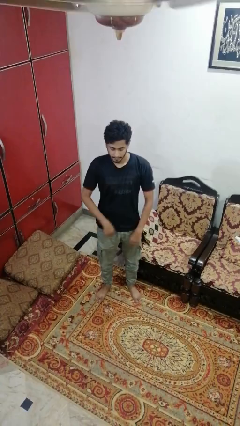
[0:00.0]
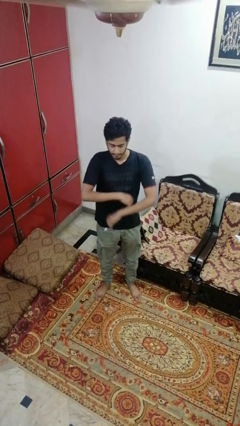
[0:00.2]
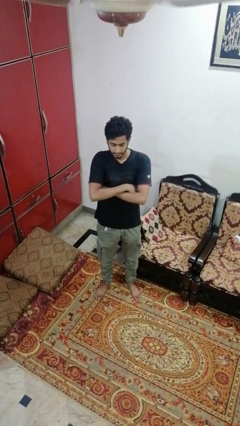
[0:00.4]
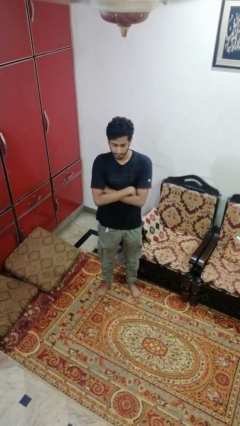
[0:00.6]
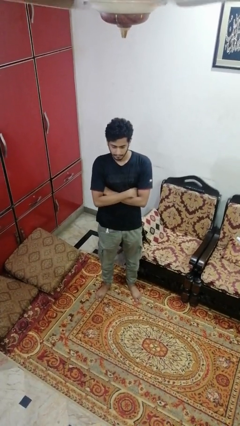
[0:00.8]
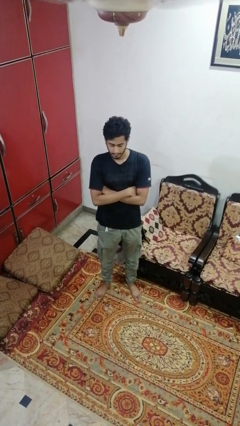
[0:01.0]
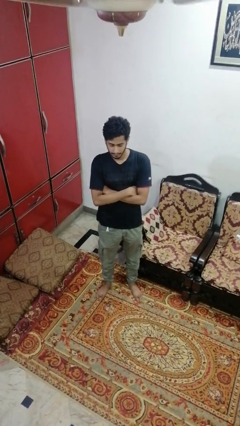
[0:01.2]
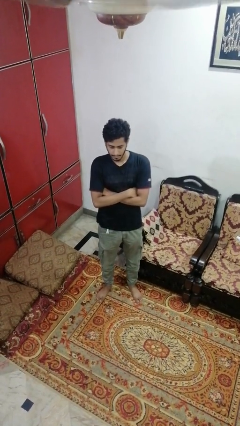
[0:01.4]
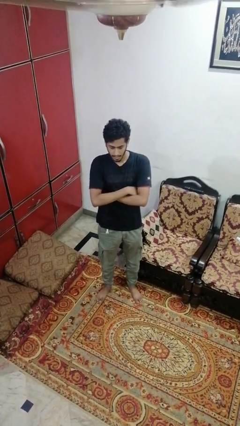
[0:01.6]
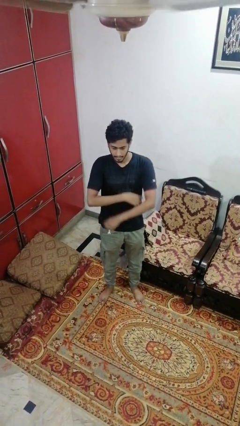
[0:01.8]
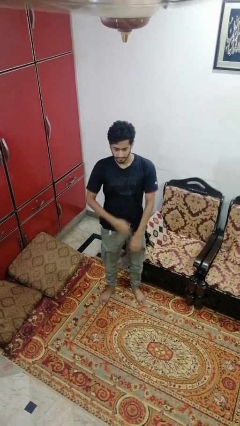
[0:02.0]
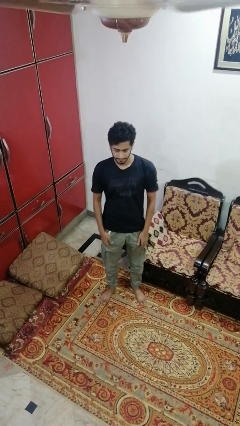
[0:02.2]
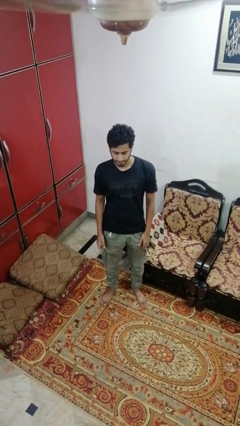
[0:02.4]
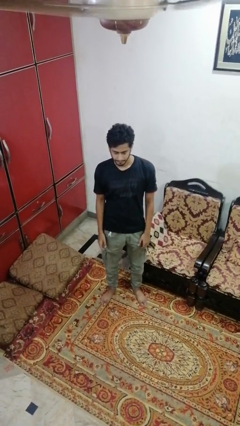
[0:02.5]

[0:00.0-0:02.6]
person crosses arms

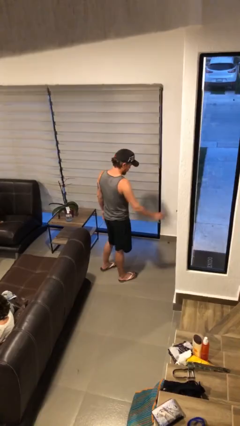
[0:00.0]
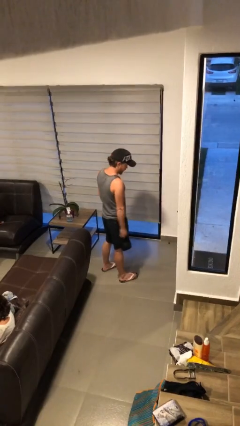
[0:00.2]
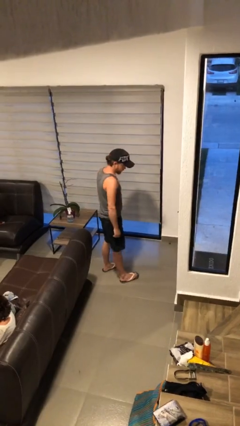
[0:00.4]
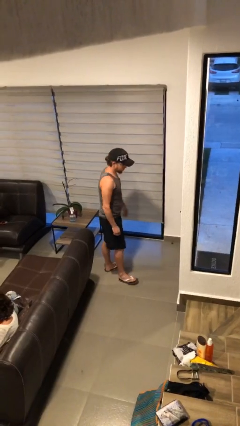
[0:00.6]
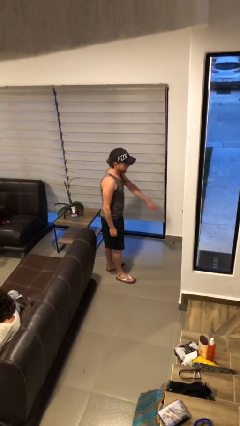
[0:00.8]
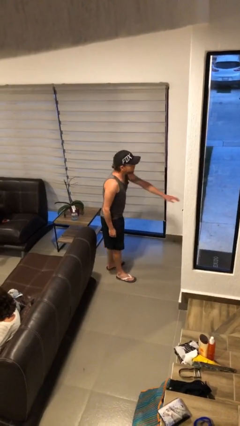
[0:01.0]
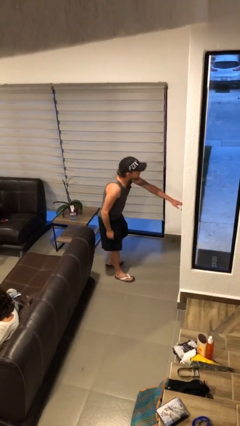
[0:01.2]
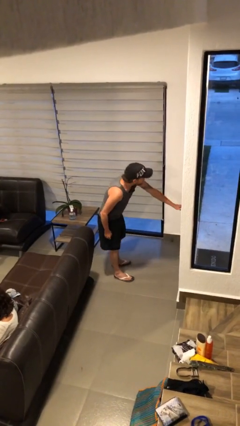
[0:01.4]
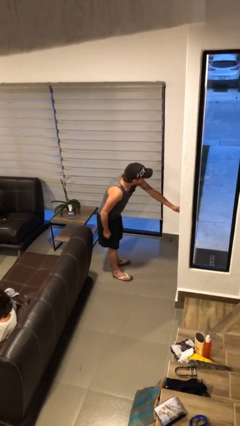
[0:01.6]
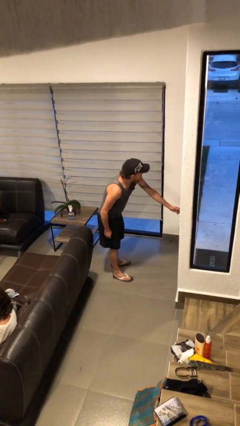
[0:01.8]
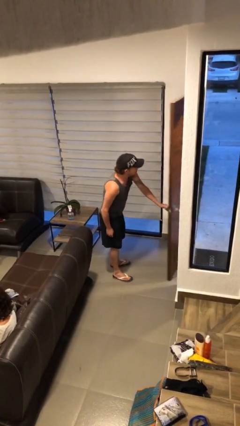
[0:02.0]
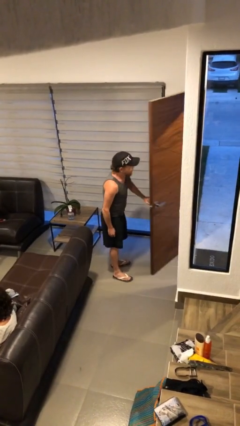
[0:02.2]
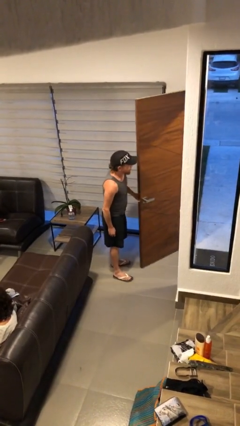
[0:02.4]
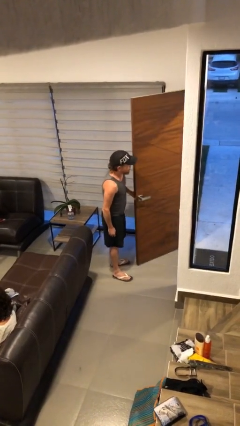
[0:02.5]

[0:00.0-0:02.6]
person opens facility door

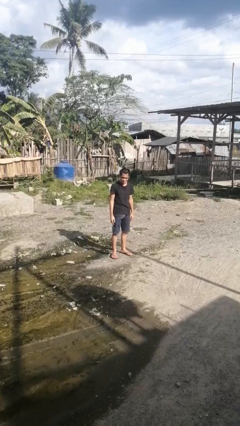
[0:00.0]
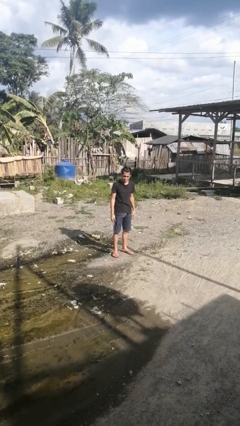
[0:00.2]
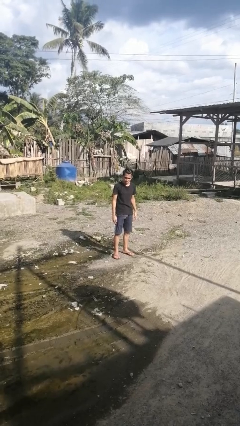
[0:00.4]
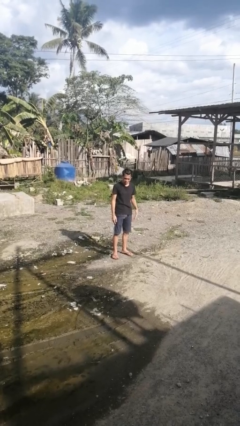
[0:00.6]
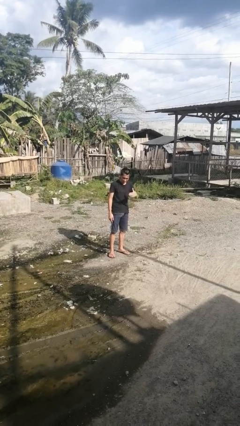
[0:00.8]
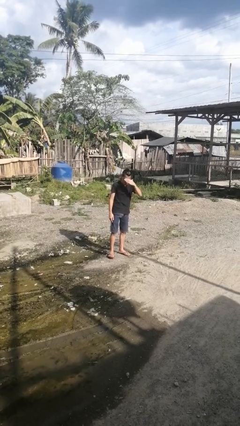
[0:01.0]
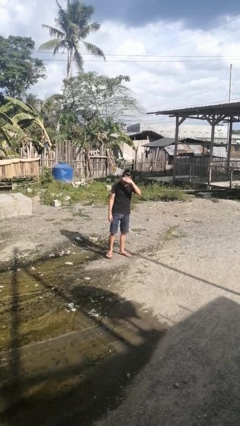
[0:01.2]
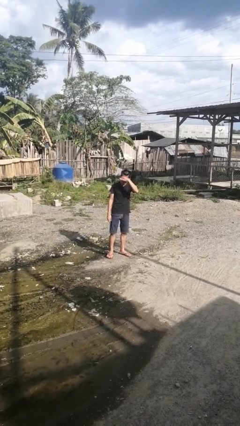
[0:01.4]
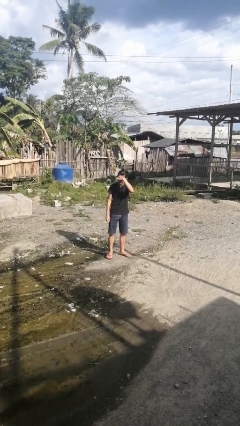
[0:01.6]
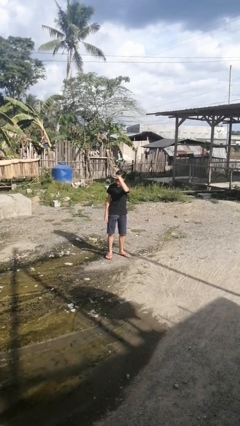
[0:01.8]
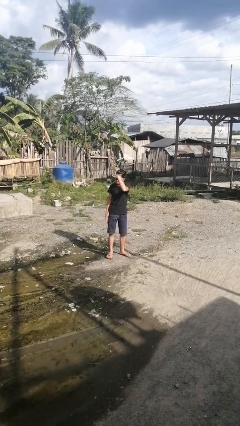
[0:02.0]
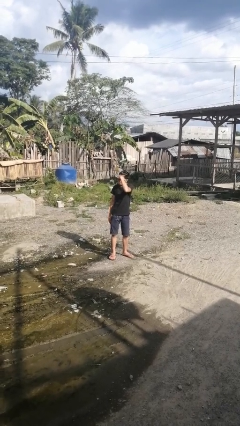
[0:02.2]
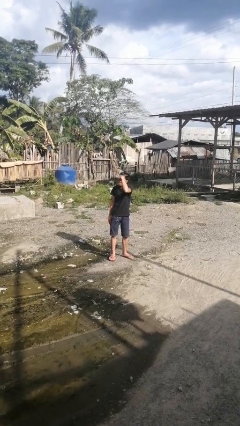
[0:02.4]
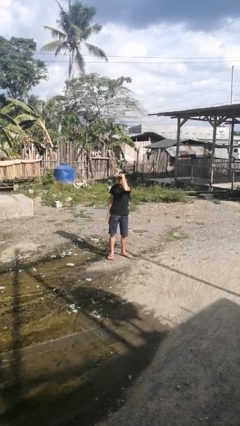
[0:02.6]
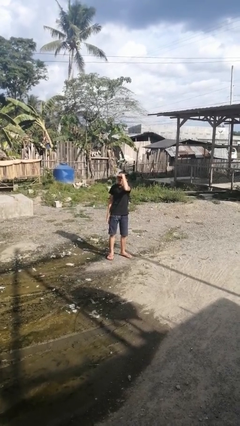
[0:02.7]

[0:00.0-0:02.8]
person shades eyes

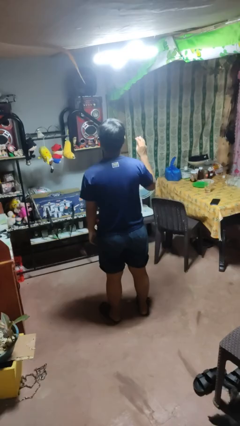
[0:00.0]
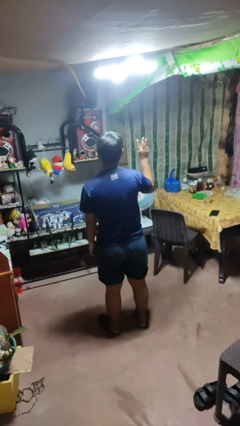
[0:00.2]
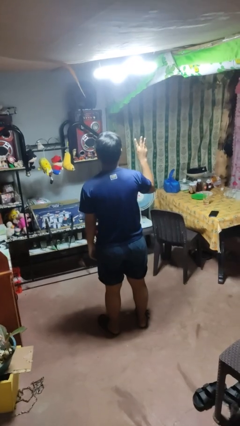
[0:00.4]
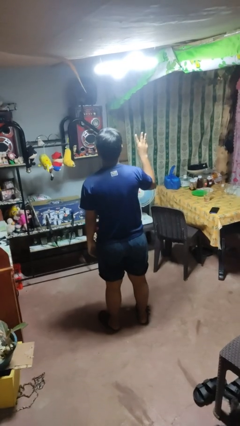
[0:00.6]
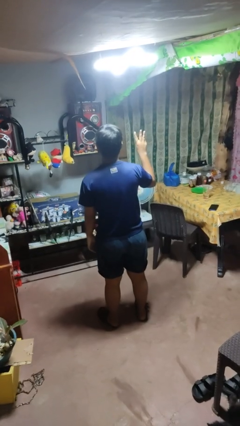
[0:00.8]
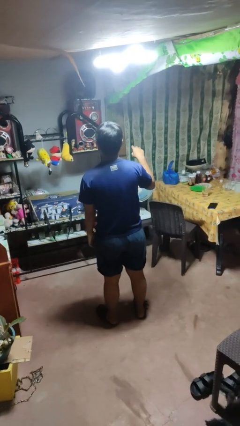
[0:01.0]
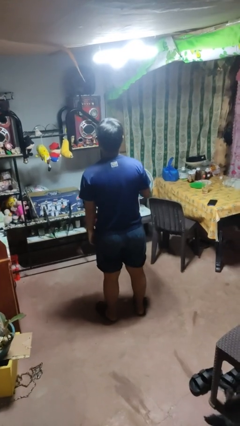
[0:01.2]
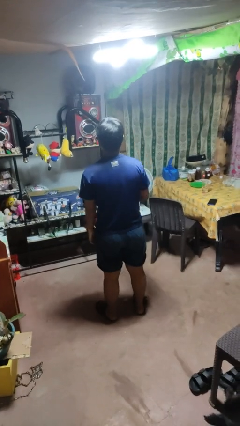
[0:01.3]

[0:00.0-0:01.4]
person gestures number three

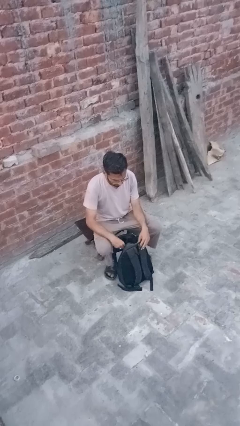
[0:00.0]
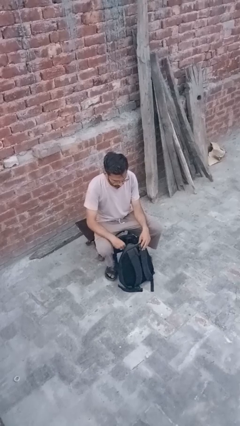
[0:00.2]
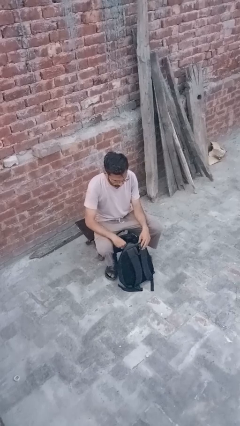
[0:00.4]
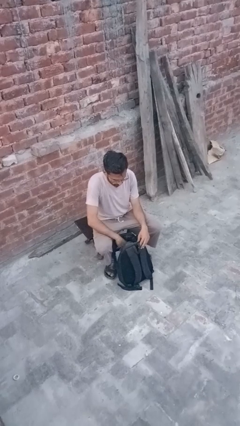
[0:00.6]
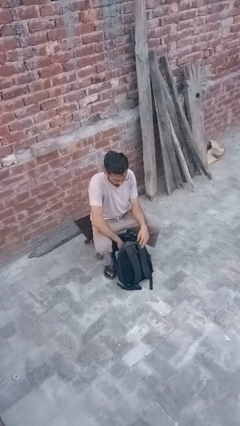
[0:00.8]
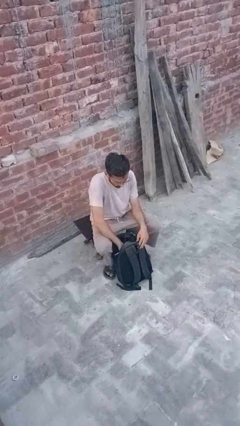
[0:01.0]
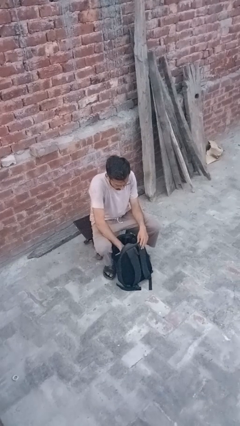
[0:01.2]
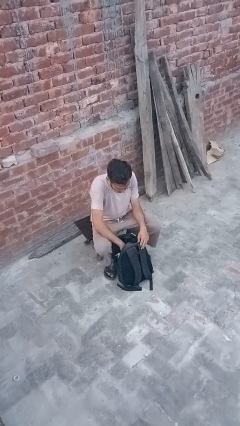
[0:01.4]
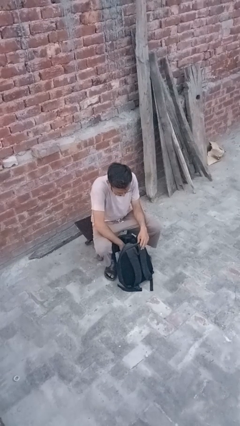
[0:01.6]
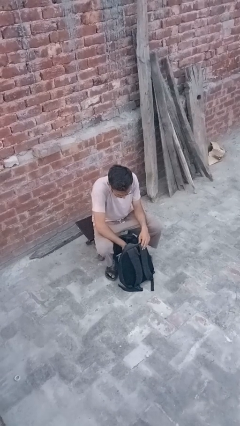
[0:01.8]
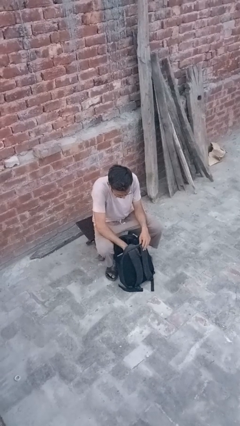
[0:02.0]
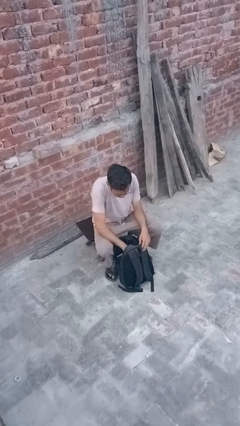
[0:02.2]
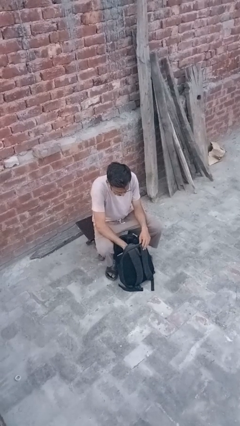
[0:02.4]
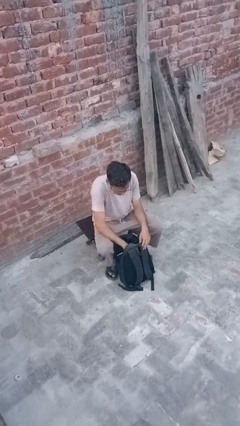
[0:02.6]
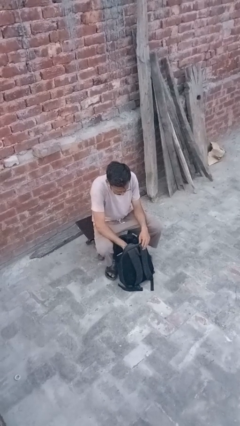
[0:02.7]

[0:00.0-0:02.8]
person searches in backpack

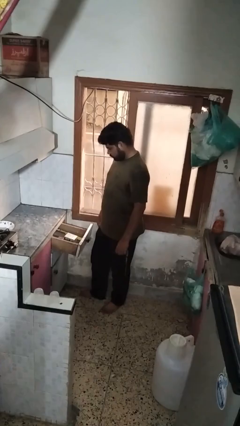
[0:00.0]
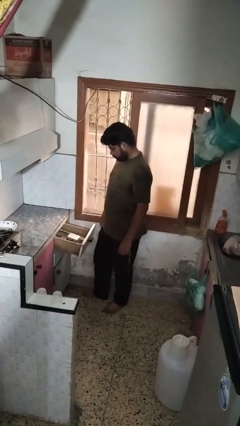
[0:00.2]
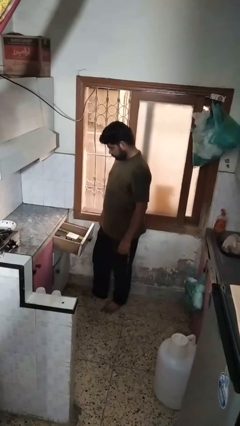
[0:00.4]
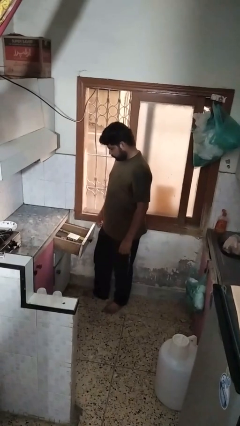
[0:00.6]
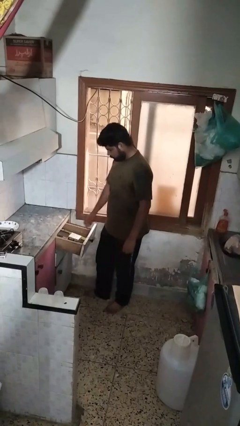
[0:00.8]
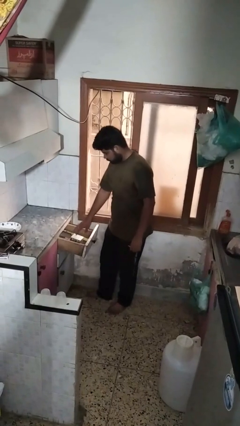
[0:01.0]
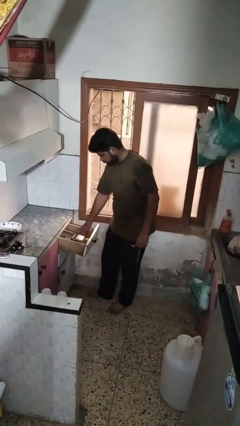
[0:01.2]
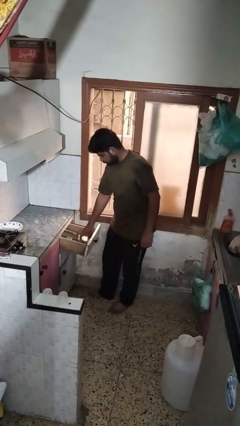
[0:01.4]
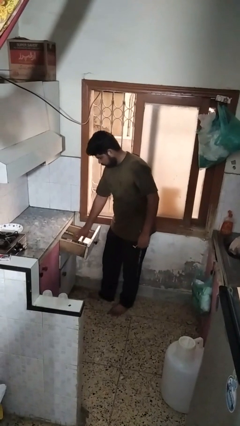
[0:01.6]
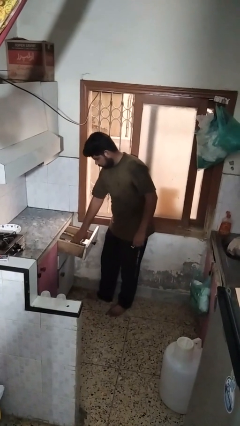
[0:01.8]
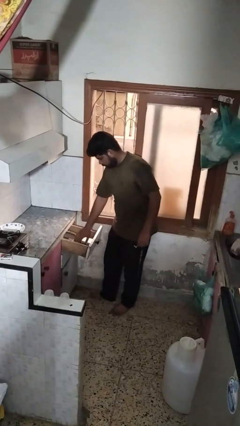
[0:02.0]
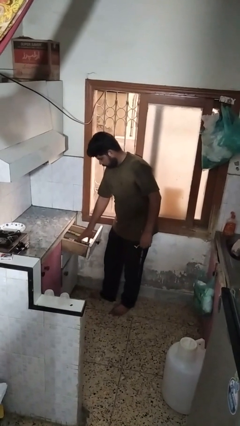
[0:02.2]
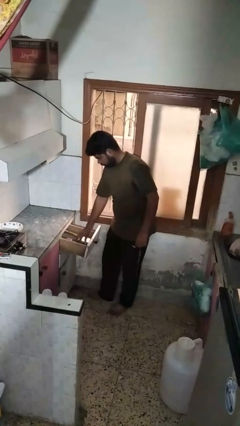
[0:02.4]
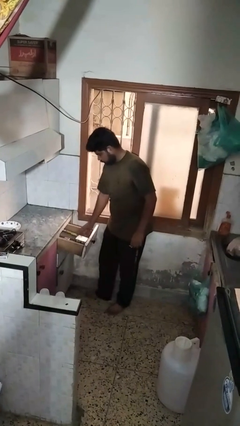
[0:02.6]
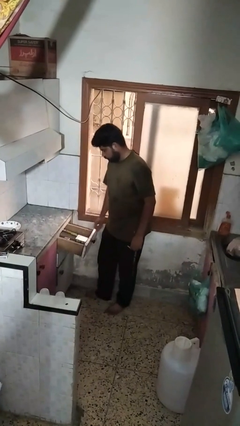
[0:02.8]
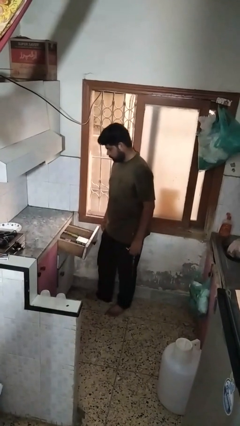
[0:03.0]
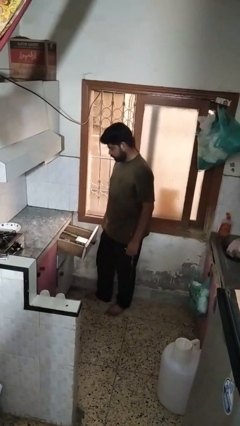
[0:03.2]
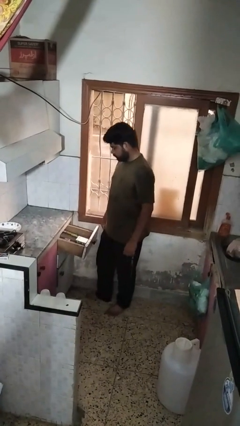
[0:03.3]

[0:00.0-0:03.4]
person searches in kitchen drawer

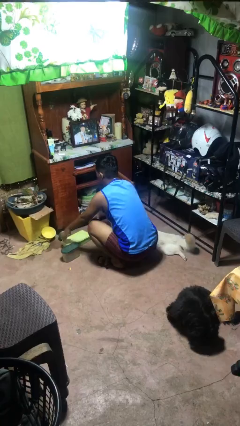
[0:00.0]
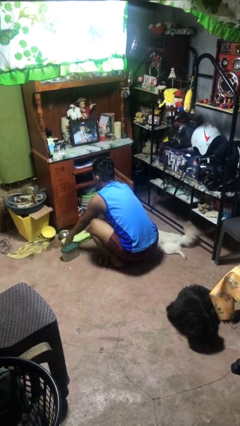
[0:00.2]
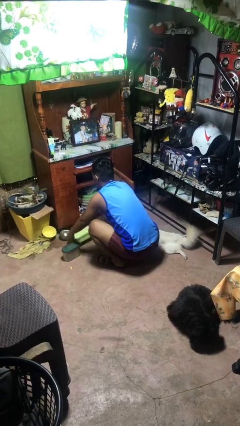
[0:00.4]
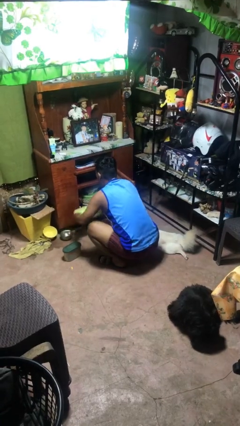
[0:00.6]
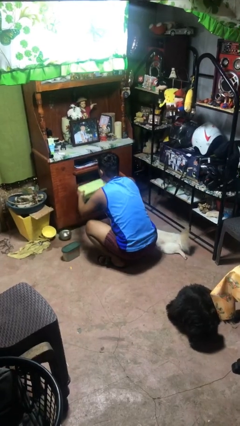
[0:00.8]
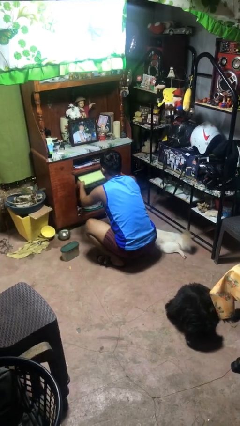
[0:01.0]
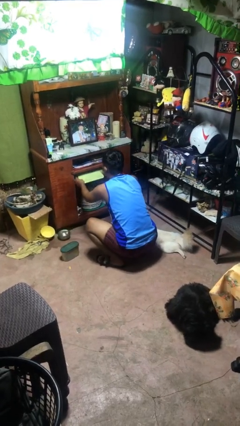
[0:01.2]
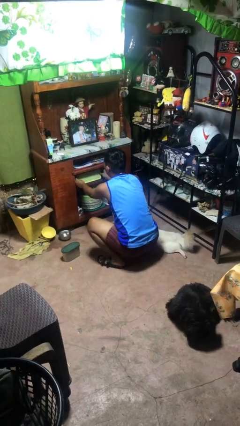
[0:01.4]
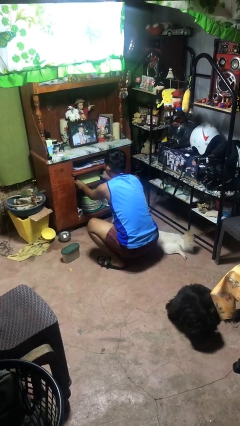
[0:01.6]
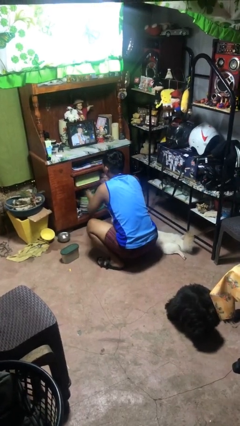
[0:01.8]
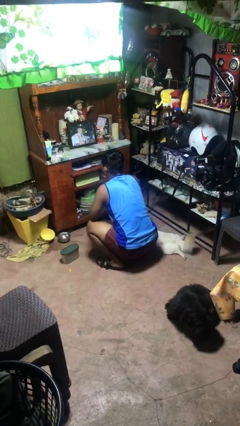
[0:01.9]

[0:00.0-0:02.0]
person puts object in cabinet
